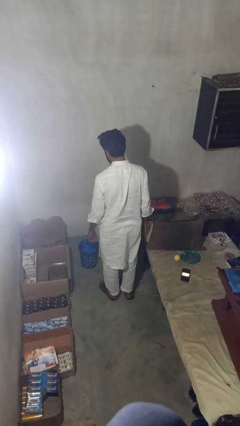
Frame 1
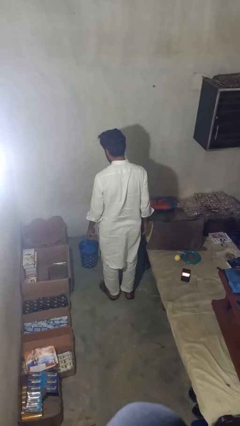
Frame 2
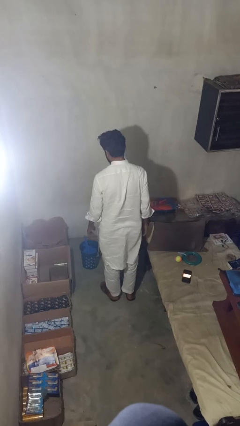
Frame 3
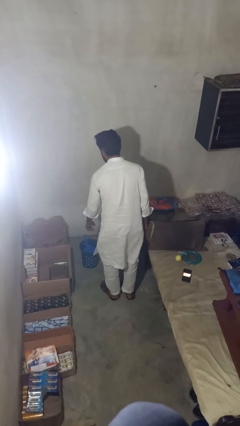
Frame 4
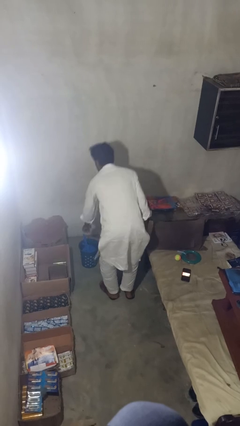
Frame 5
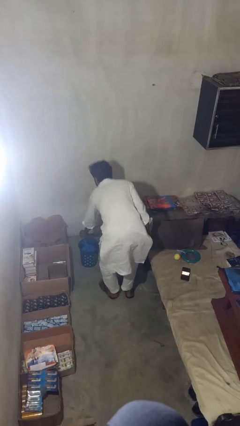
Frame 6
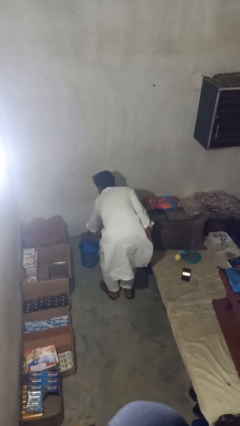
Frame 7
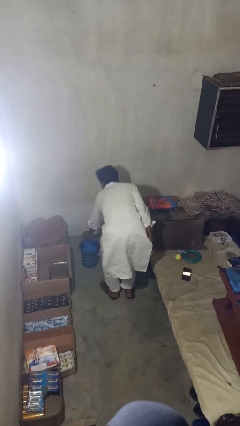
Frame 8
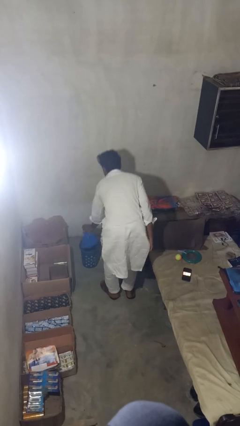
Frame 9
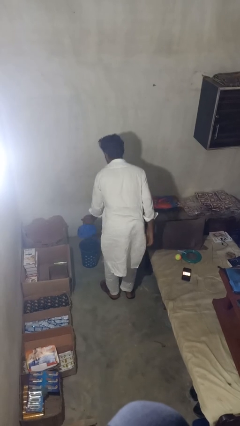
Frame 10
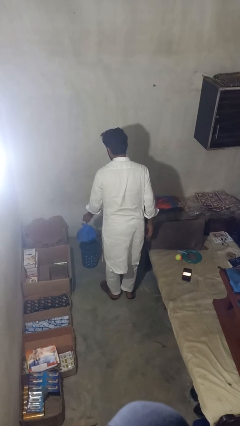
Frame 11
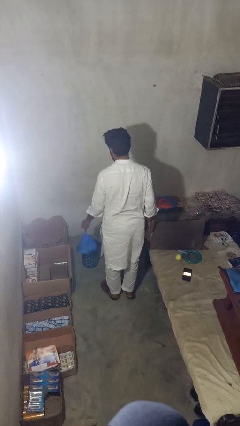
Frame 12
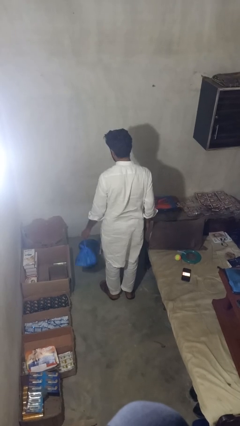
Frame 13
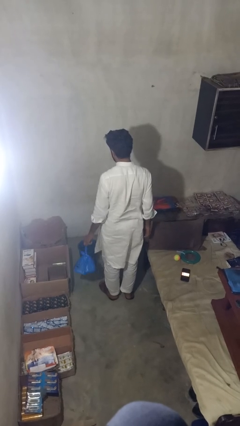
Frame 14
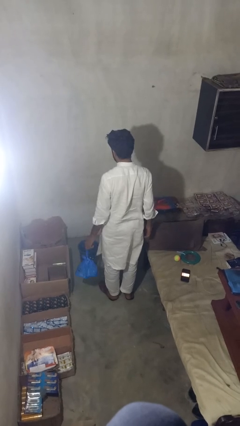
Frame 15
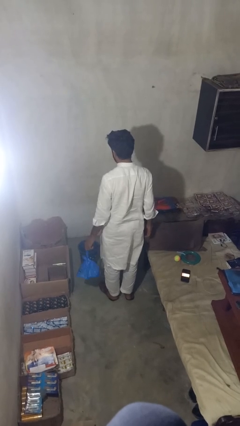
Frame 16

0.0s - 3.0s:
person takes object from basket

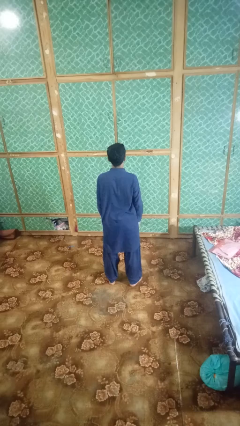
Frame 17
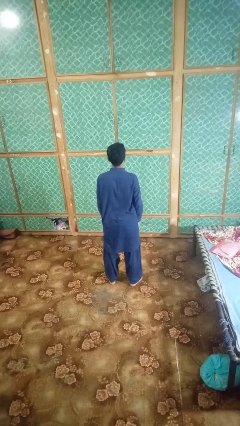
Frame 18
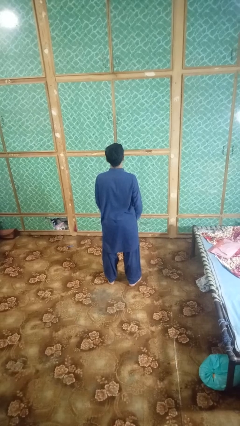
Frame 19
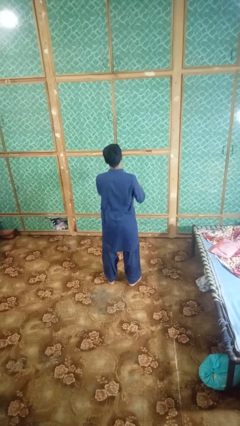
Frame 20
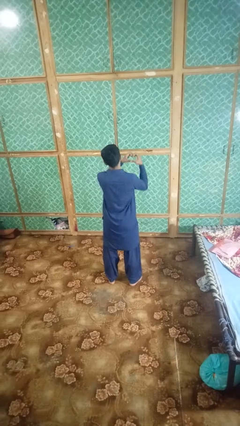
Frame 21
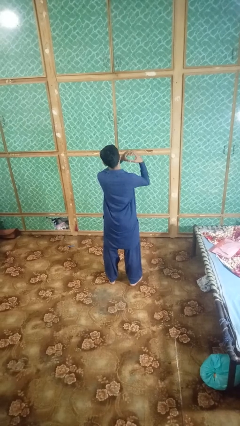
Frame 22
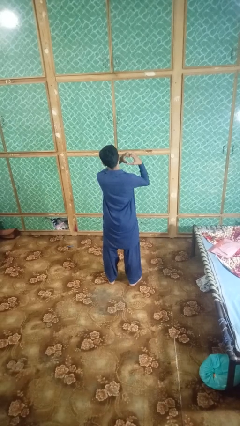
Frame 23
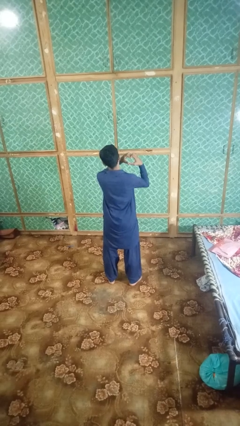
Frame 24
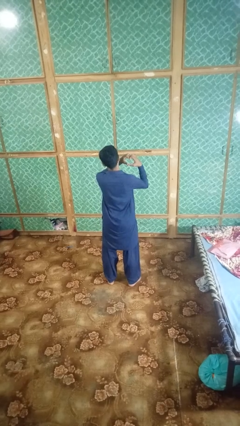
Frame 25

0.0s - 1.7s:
person gestures heart

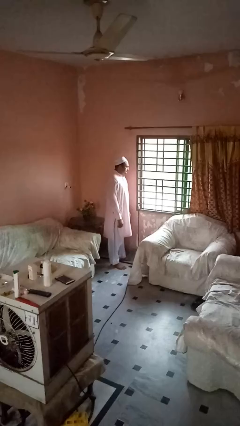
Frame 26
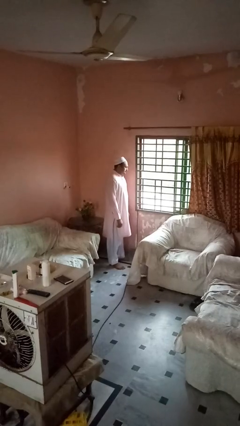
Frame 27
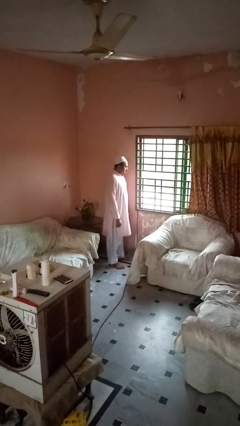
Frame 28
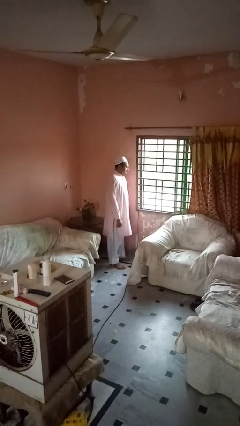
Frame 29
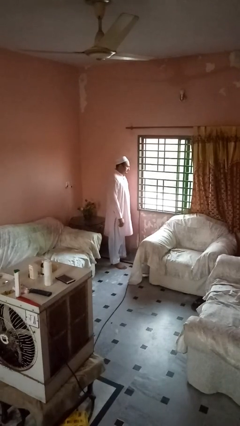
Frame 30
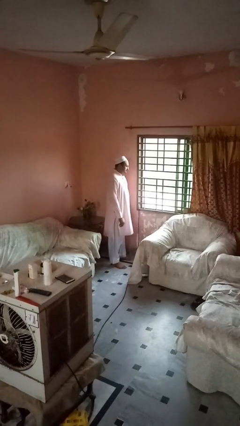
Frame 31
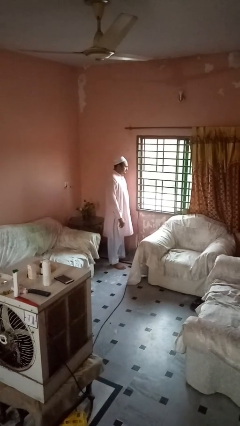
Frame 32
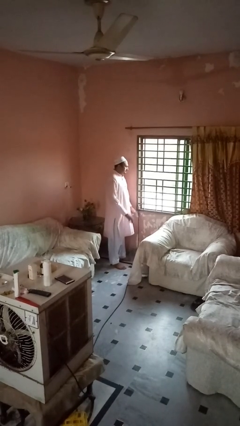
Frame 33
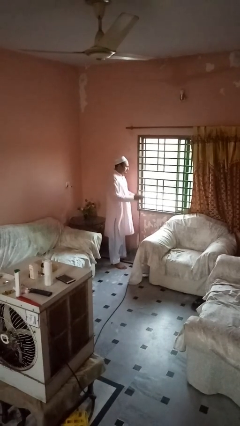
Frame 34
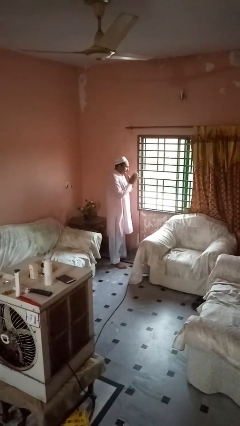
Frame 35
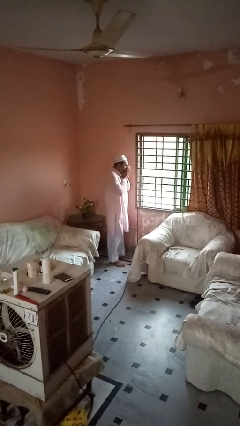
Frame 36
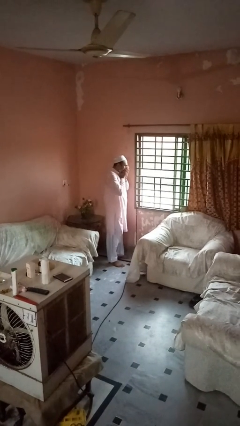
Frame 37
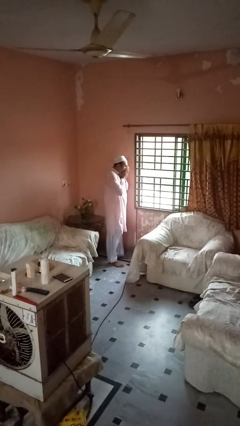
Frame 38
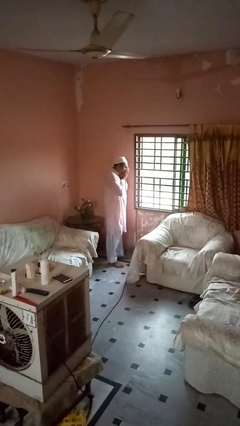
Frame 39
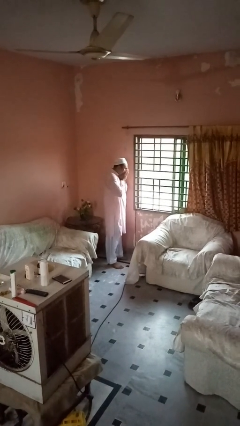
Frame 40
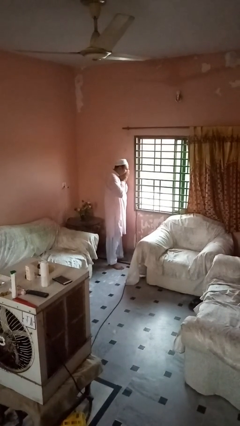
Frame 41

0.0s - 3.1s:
person covers face with hands

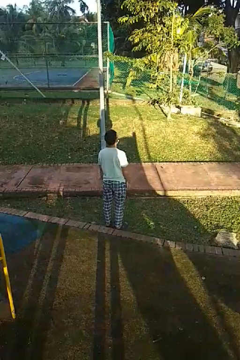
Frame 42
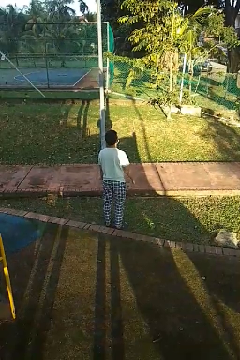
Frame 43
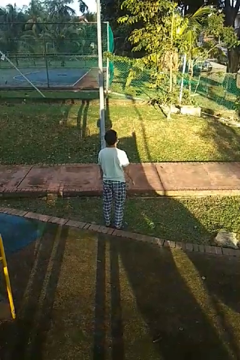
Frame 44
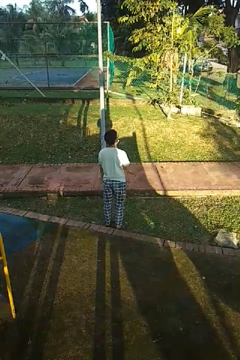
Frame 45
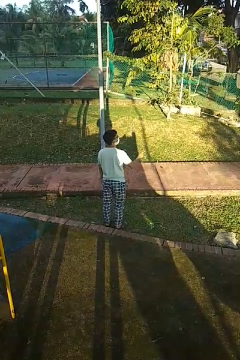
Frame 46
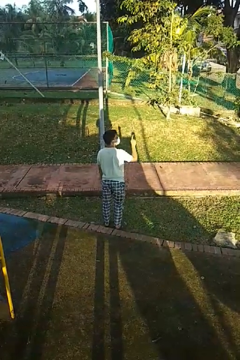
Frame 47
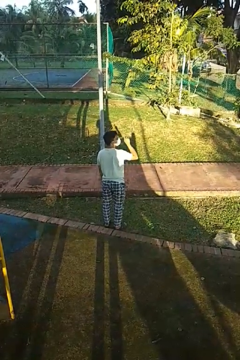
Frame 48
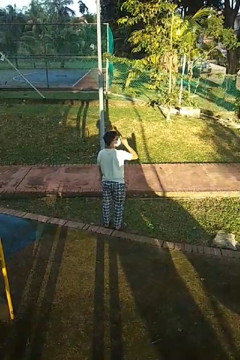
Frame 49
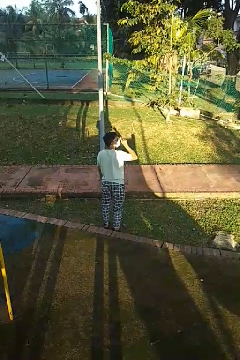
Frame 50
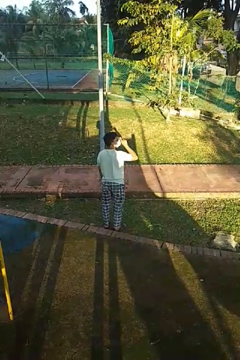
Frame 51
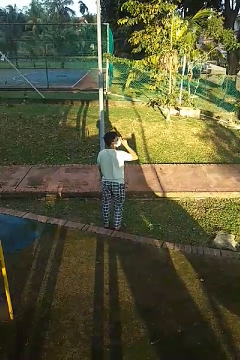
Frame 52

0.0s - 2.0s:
person gestures be quiet

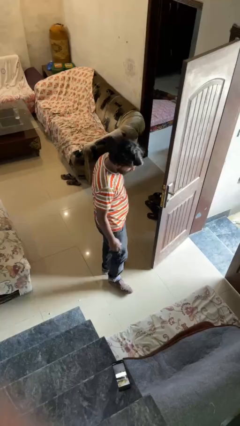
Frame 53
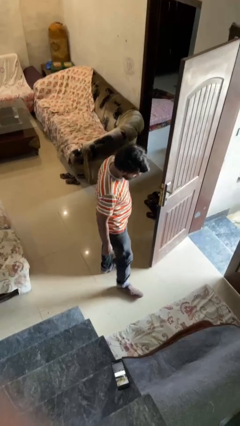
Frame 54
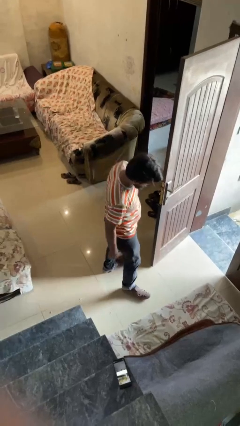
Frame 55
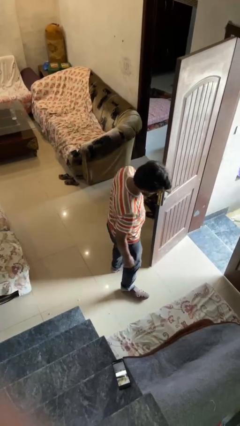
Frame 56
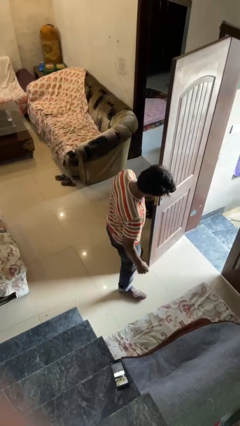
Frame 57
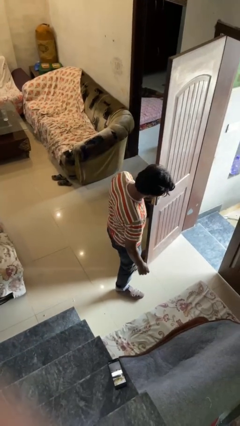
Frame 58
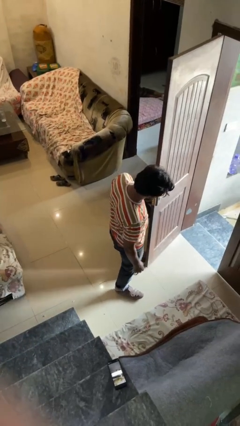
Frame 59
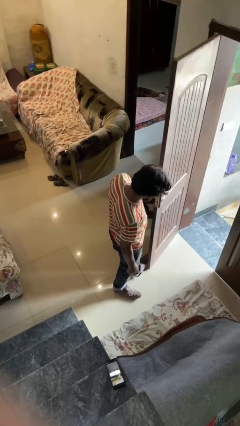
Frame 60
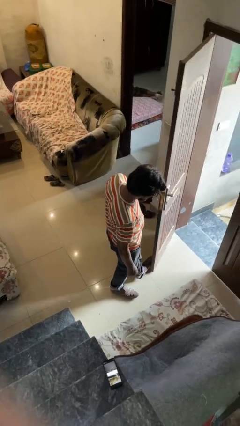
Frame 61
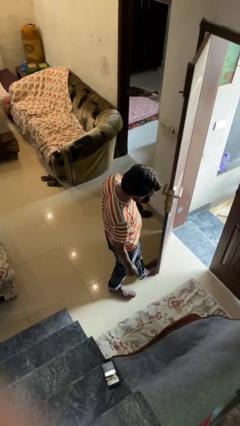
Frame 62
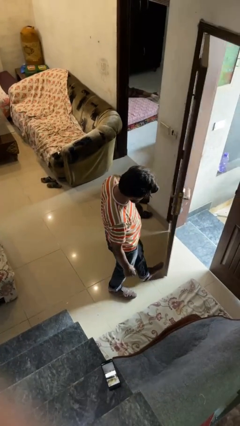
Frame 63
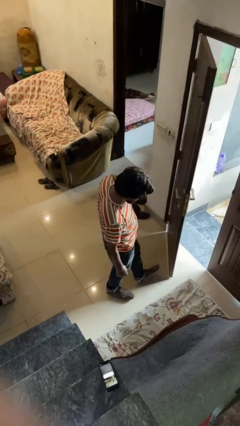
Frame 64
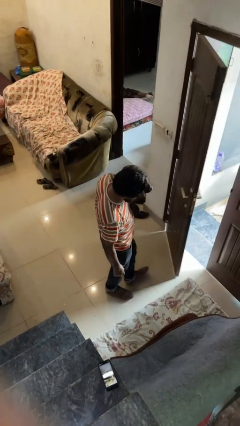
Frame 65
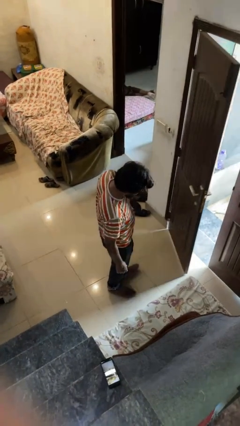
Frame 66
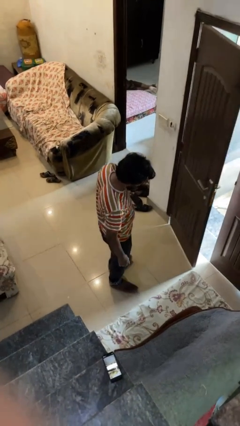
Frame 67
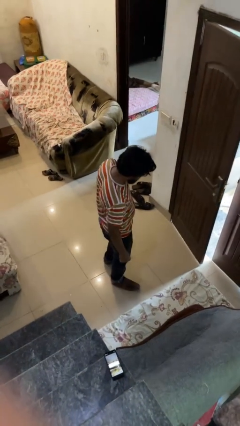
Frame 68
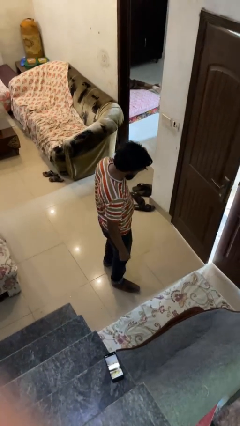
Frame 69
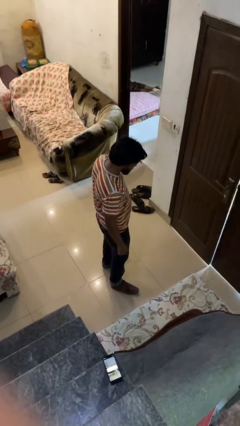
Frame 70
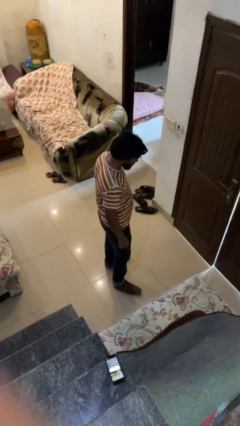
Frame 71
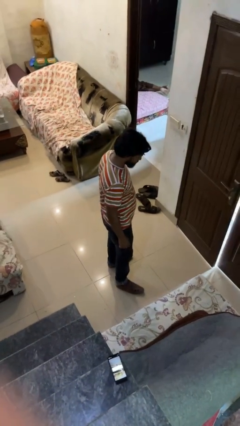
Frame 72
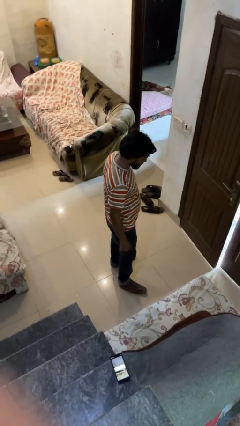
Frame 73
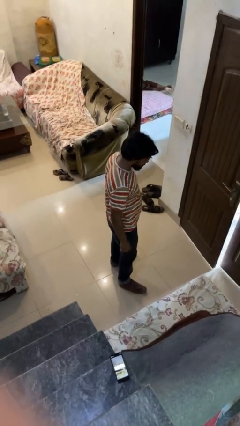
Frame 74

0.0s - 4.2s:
person closes door with foot

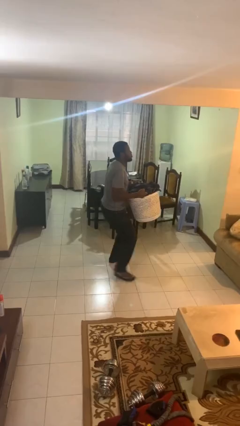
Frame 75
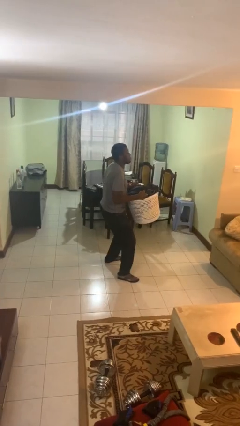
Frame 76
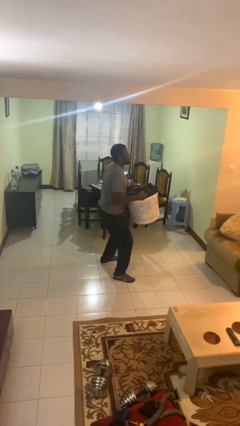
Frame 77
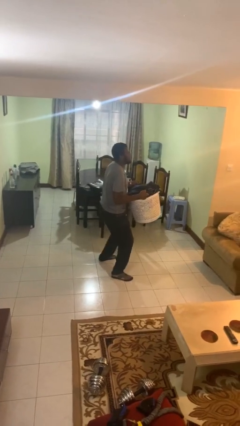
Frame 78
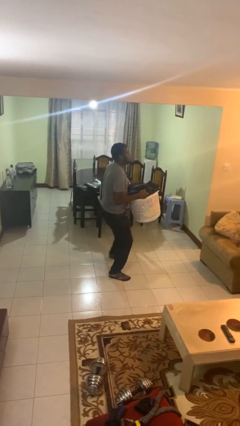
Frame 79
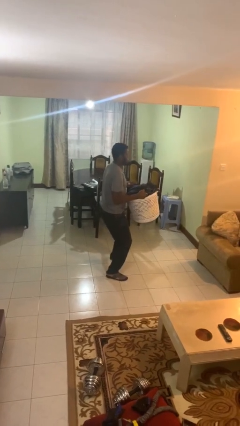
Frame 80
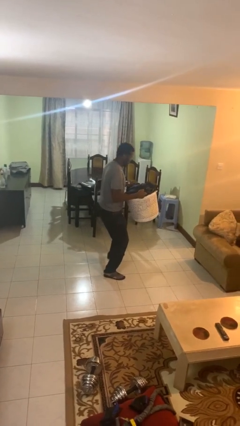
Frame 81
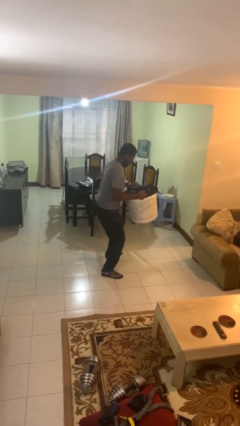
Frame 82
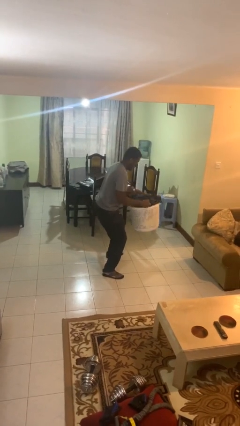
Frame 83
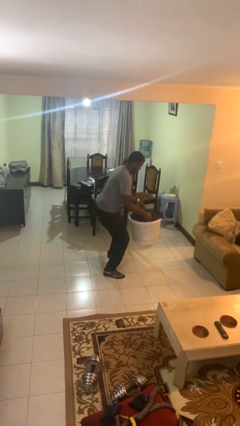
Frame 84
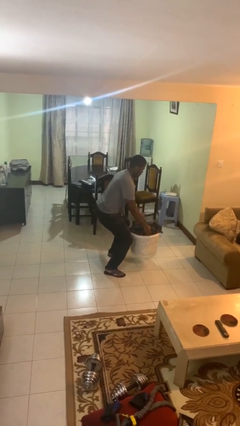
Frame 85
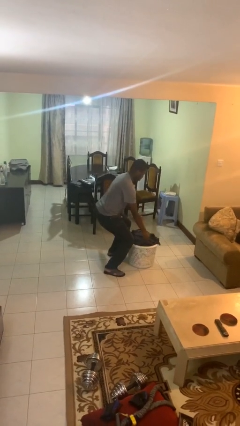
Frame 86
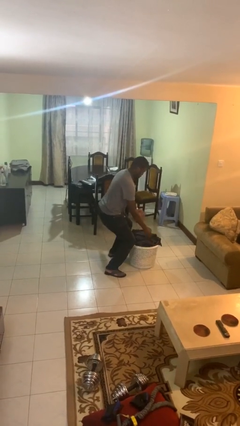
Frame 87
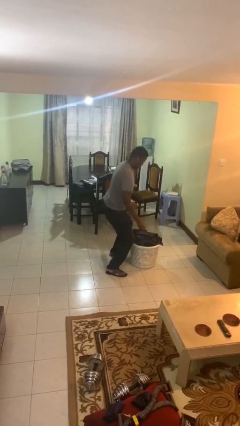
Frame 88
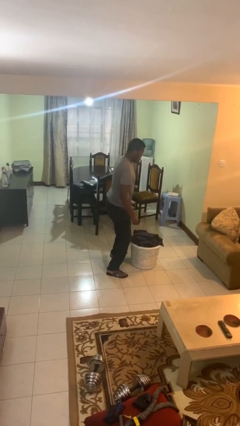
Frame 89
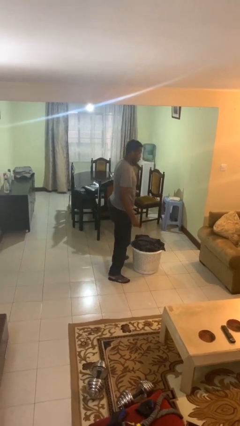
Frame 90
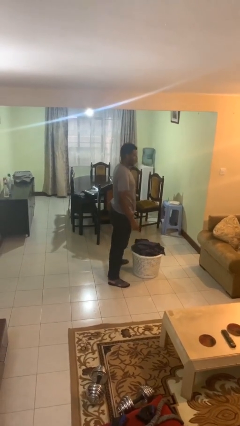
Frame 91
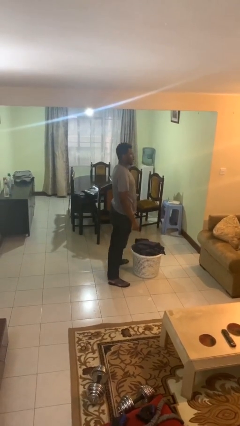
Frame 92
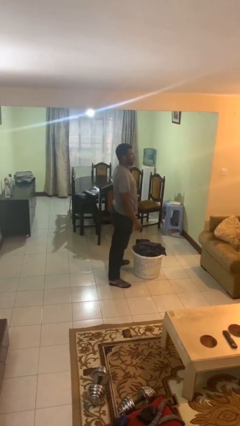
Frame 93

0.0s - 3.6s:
person puts down object on floor

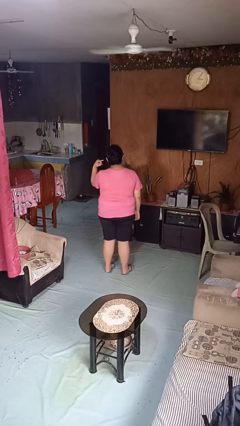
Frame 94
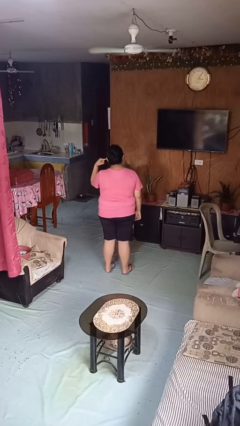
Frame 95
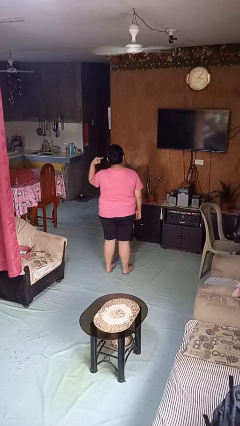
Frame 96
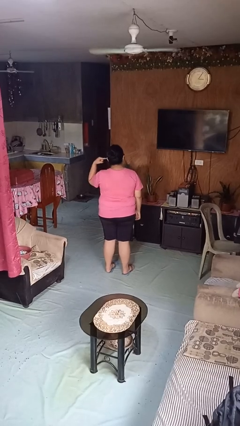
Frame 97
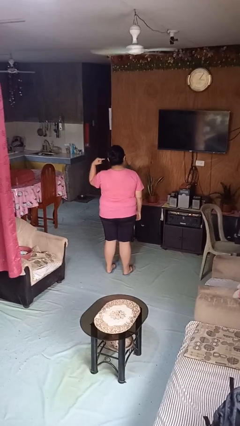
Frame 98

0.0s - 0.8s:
person gestures listen closely
